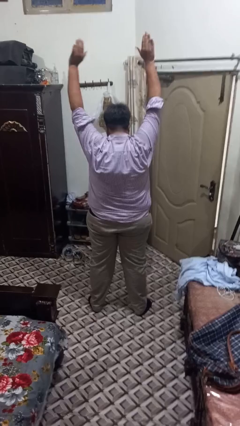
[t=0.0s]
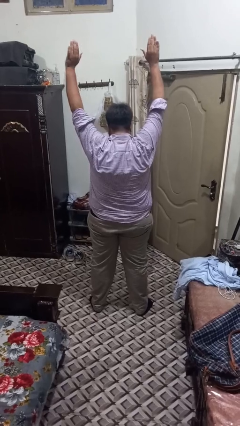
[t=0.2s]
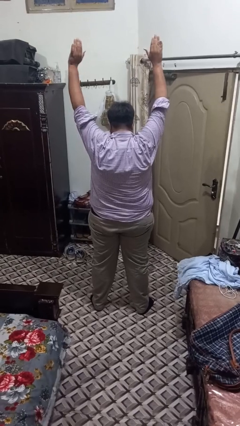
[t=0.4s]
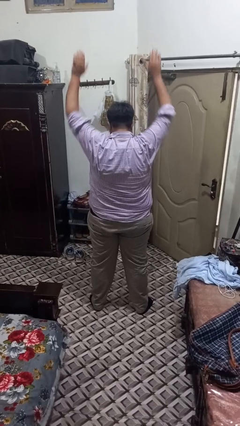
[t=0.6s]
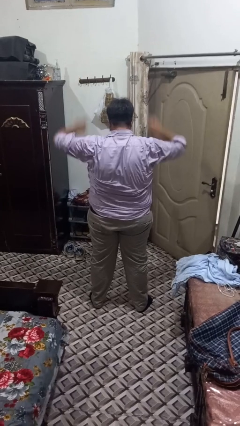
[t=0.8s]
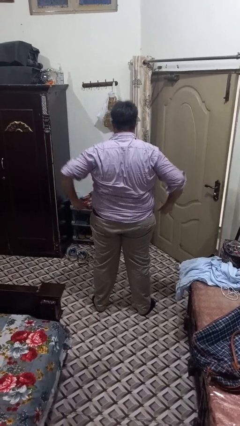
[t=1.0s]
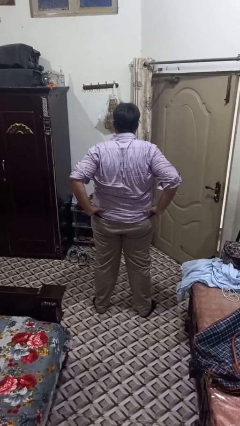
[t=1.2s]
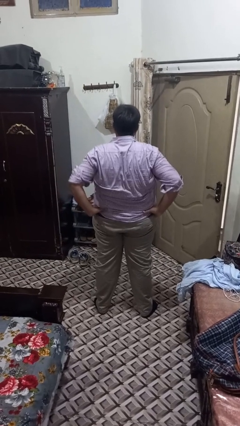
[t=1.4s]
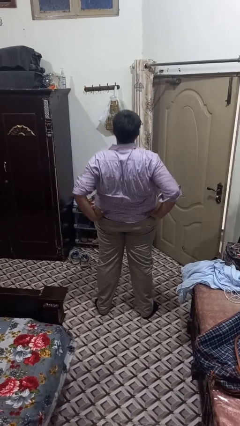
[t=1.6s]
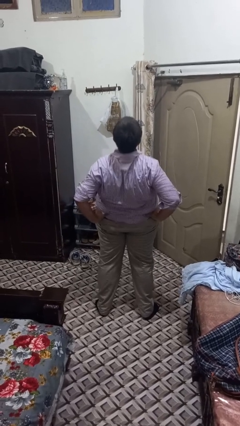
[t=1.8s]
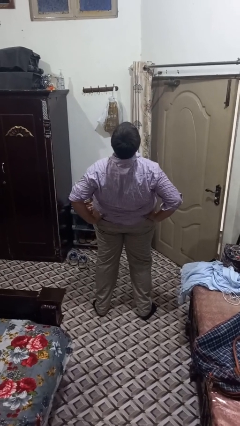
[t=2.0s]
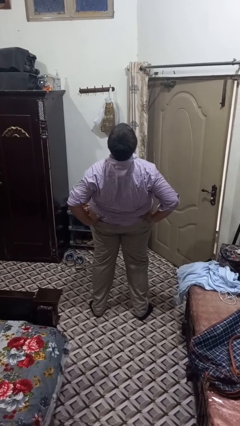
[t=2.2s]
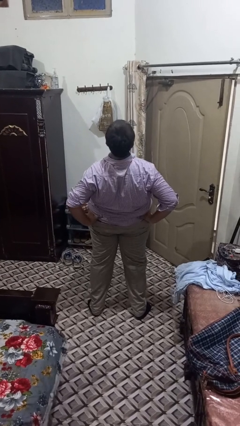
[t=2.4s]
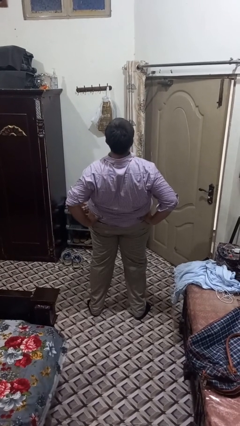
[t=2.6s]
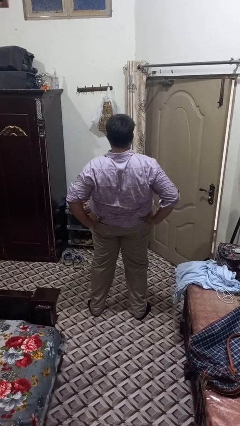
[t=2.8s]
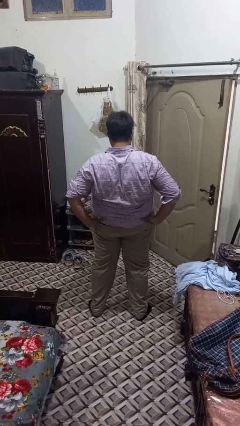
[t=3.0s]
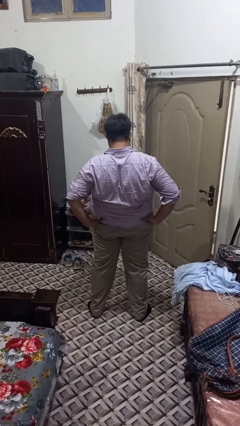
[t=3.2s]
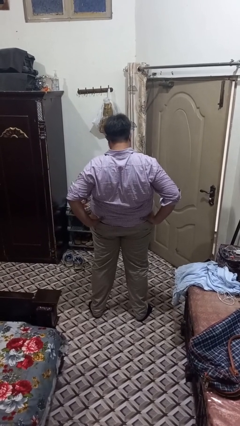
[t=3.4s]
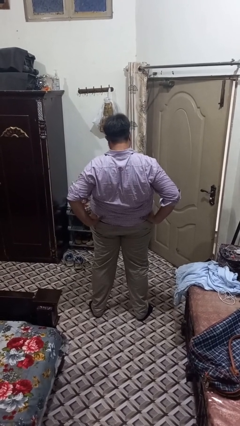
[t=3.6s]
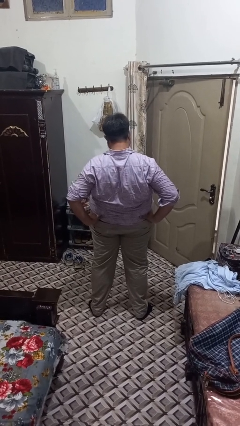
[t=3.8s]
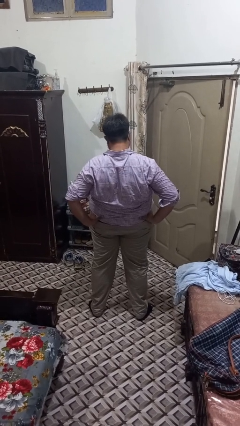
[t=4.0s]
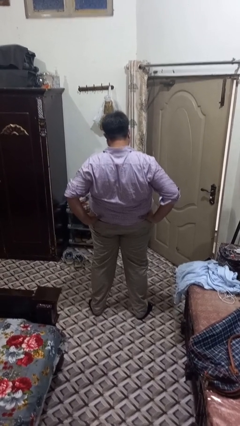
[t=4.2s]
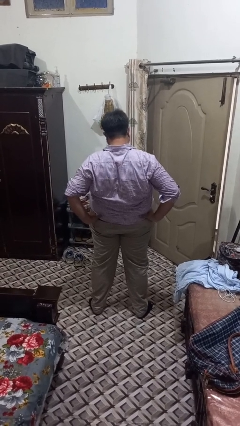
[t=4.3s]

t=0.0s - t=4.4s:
person stretches back

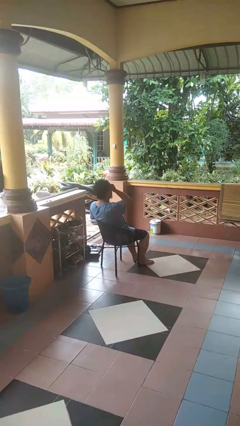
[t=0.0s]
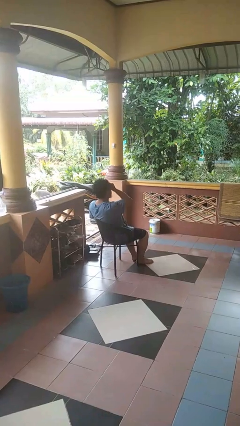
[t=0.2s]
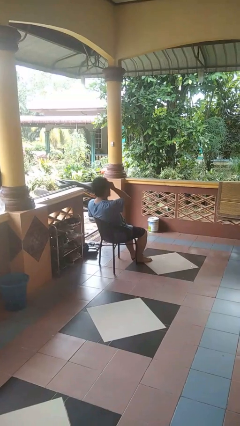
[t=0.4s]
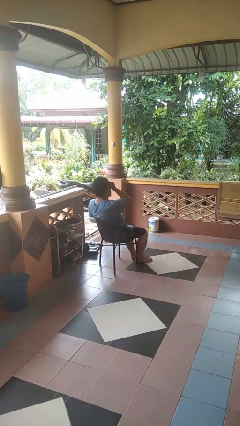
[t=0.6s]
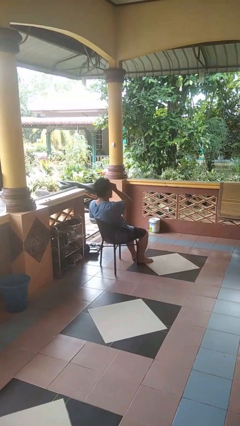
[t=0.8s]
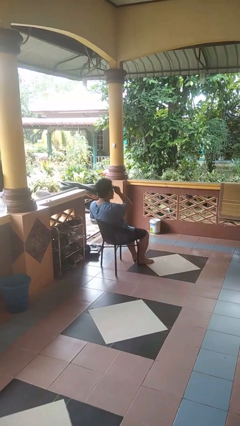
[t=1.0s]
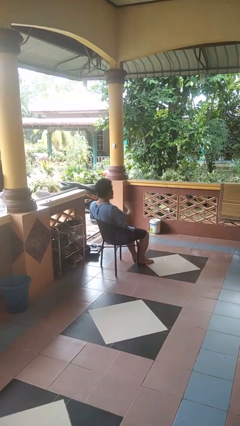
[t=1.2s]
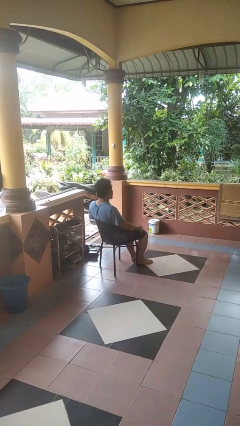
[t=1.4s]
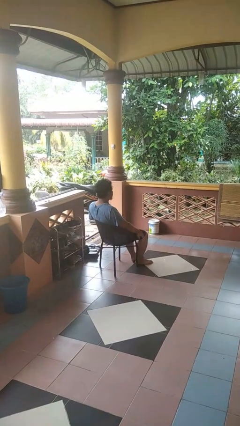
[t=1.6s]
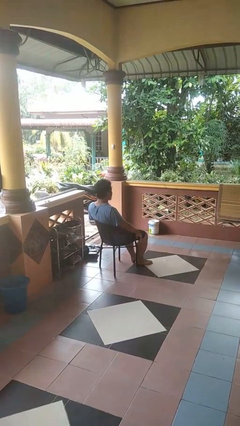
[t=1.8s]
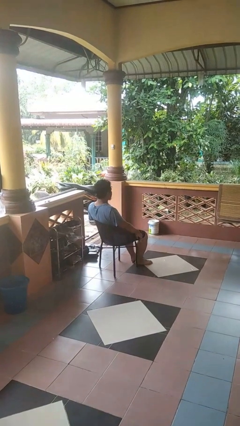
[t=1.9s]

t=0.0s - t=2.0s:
person rubs eyes

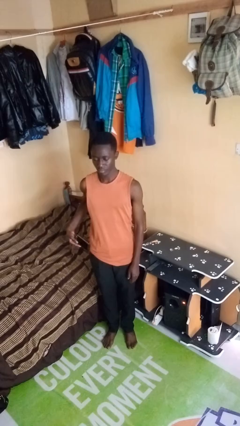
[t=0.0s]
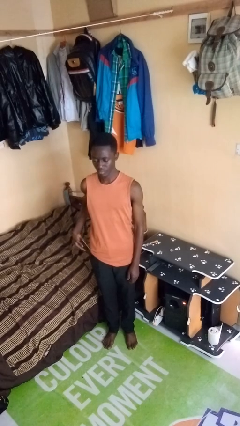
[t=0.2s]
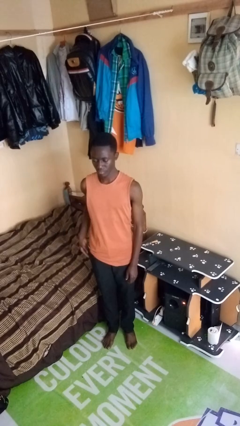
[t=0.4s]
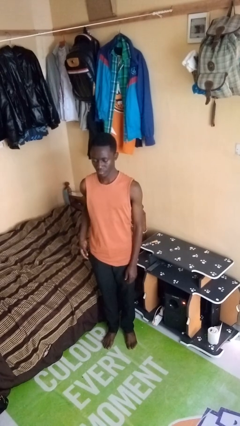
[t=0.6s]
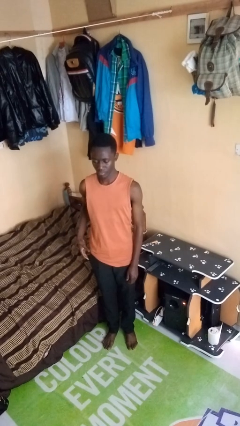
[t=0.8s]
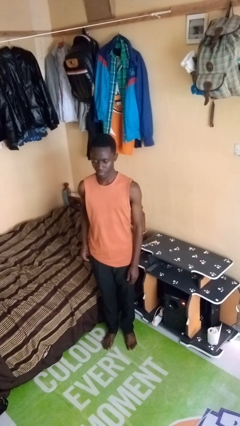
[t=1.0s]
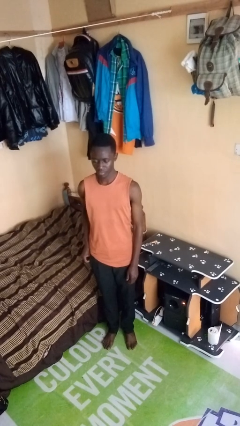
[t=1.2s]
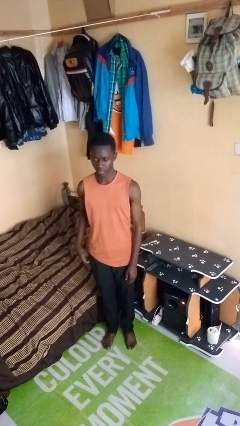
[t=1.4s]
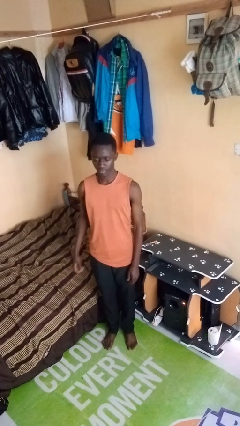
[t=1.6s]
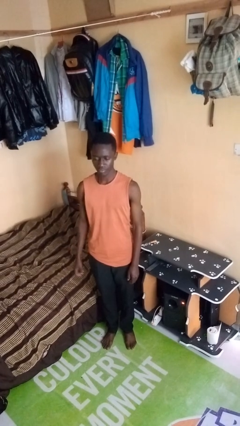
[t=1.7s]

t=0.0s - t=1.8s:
person puts phone into pocket

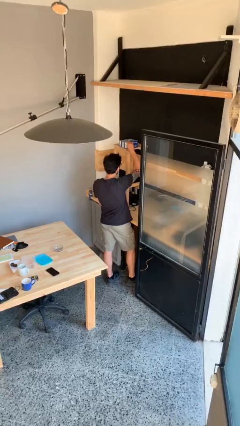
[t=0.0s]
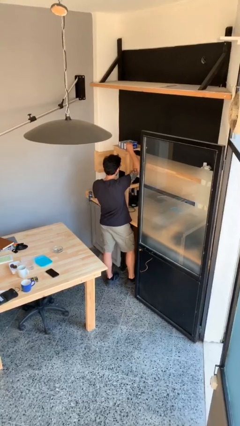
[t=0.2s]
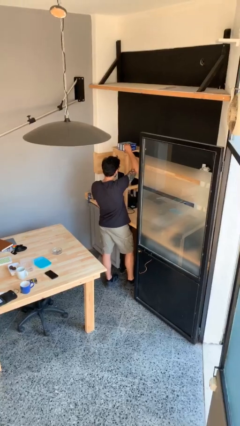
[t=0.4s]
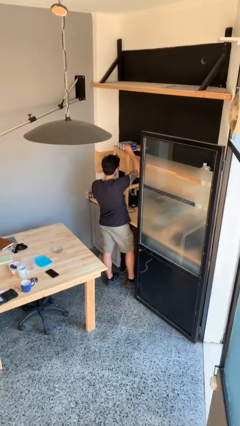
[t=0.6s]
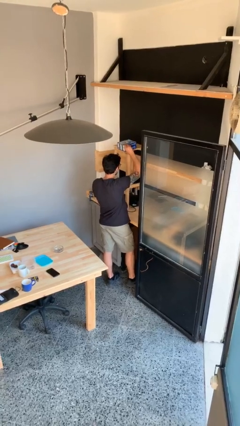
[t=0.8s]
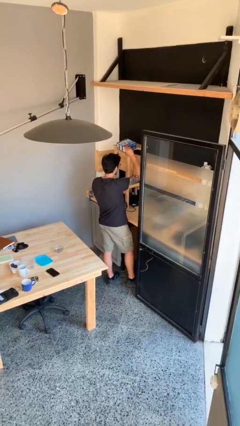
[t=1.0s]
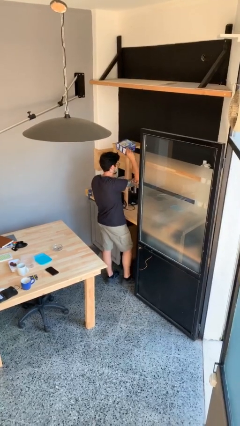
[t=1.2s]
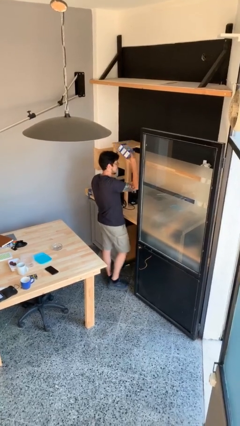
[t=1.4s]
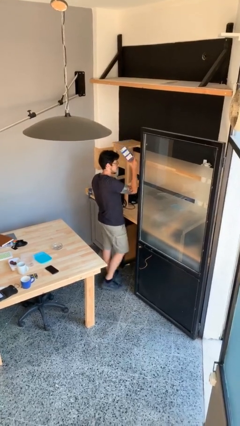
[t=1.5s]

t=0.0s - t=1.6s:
person picks up object from shelf

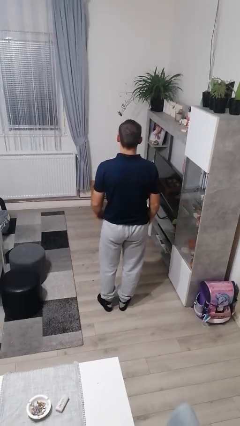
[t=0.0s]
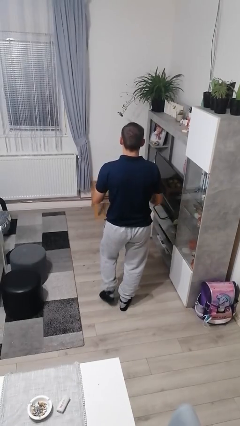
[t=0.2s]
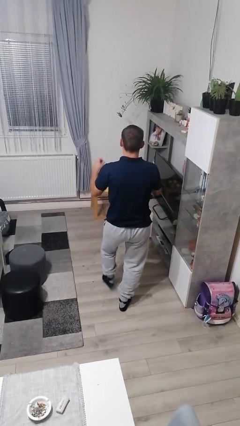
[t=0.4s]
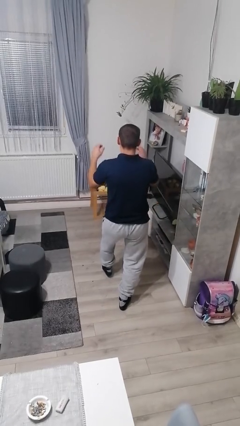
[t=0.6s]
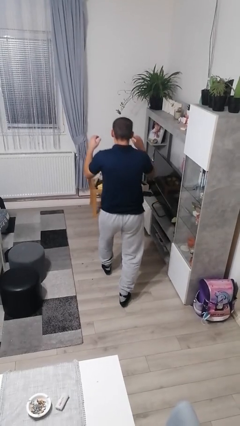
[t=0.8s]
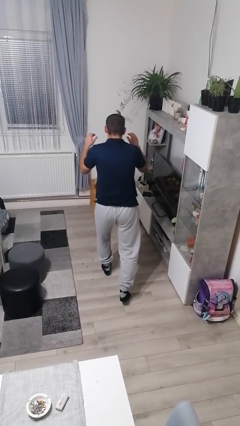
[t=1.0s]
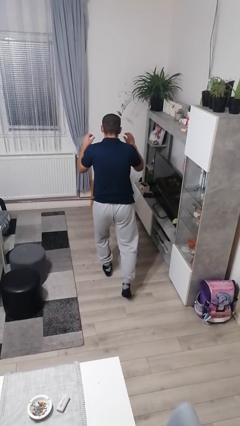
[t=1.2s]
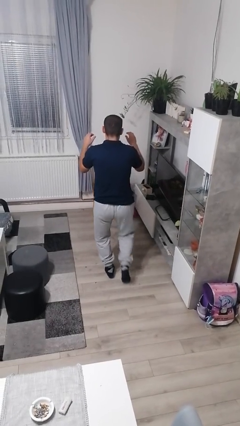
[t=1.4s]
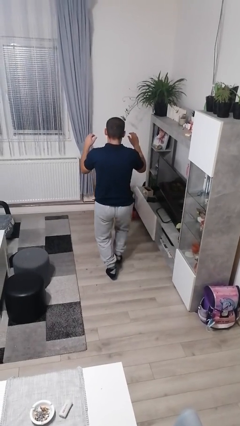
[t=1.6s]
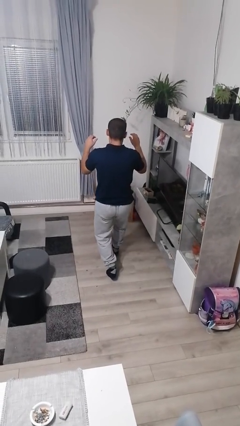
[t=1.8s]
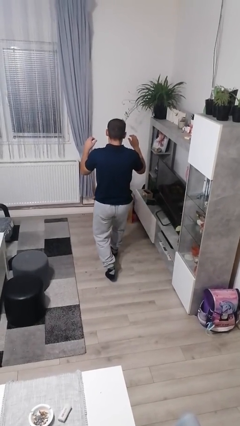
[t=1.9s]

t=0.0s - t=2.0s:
person walks tiptoe

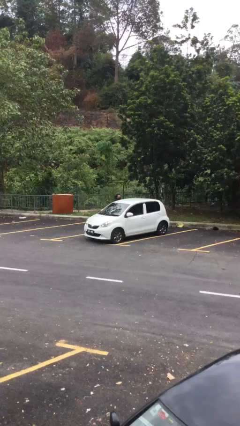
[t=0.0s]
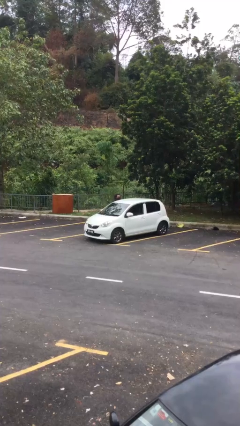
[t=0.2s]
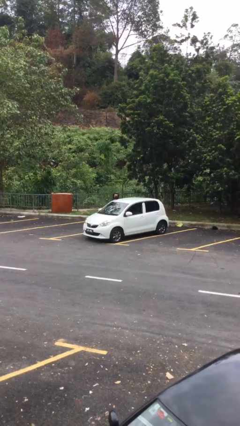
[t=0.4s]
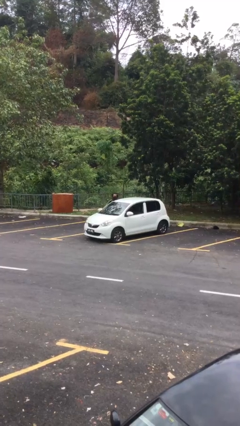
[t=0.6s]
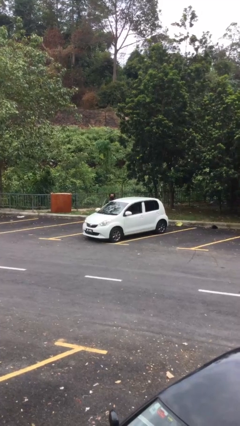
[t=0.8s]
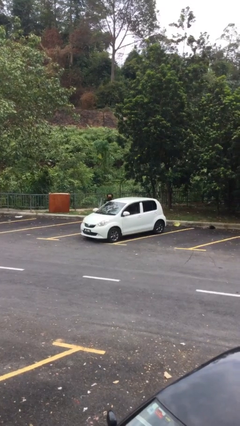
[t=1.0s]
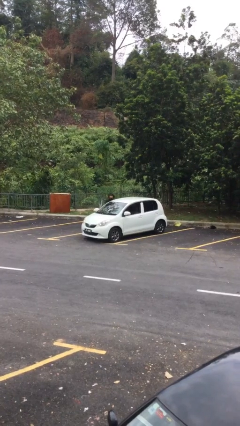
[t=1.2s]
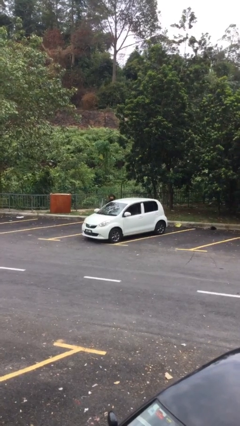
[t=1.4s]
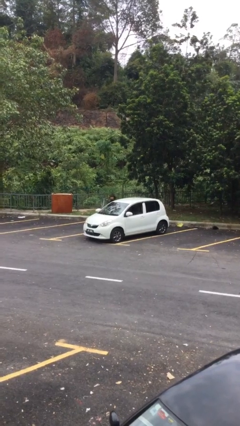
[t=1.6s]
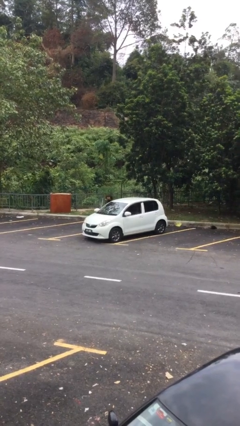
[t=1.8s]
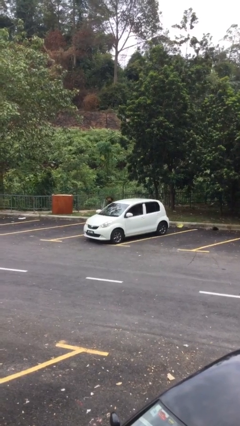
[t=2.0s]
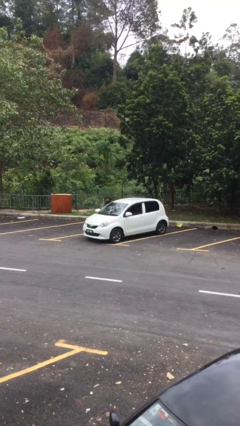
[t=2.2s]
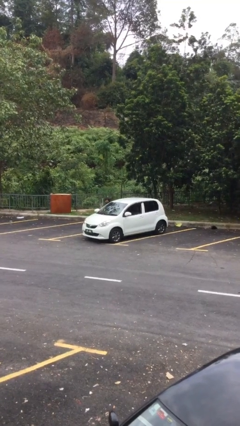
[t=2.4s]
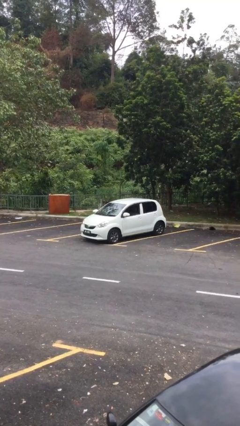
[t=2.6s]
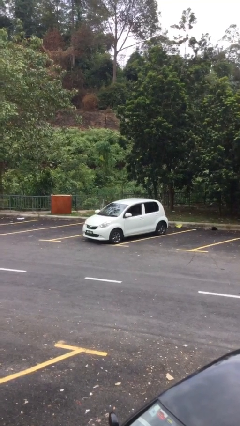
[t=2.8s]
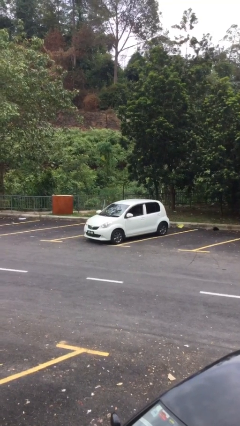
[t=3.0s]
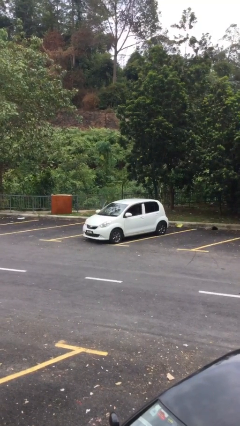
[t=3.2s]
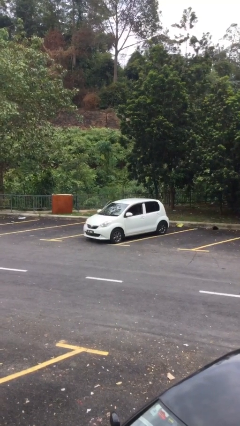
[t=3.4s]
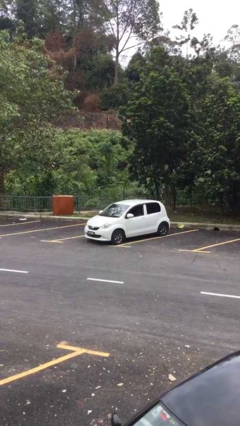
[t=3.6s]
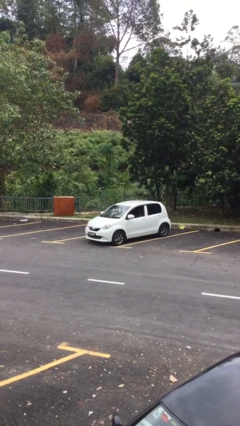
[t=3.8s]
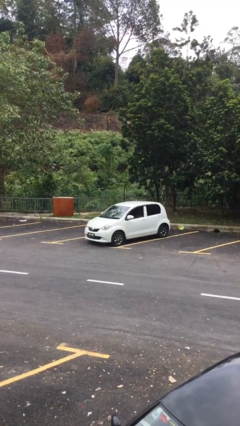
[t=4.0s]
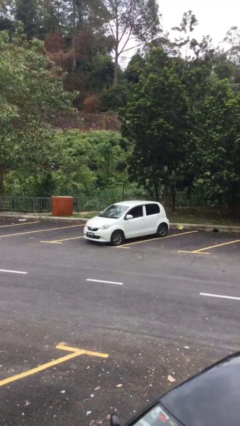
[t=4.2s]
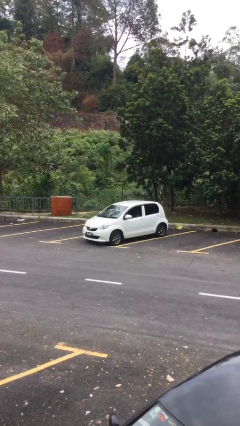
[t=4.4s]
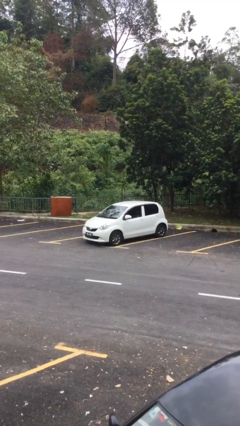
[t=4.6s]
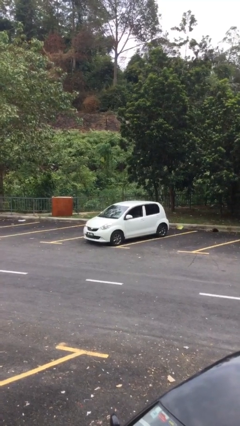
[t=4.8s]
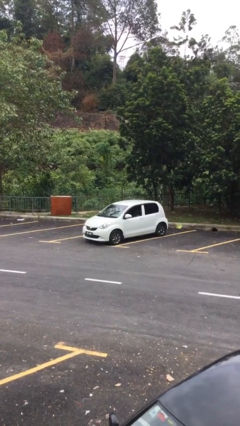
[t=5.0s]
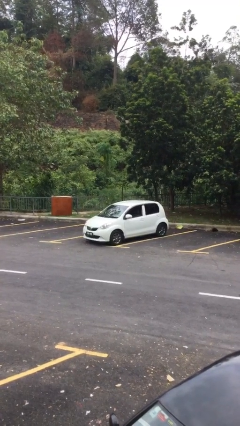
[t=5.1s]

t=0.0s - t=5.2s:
car picks up person
